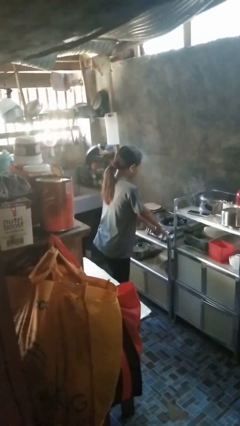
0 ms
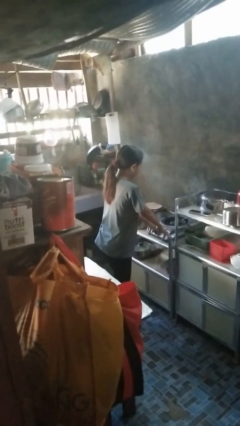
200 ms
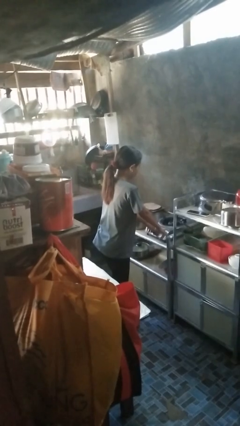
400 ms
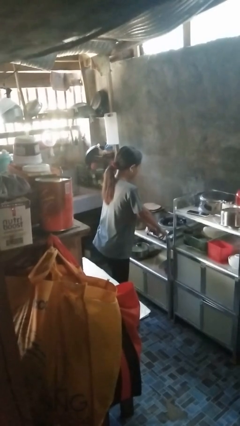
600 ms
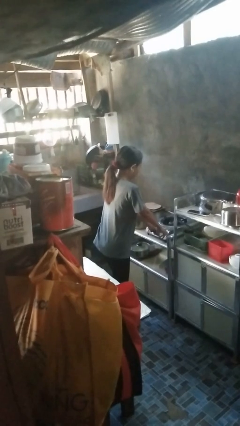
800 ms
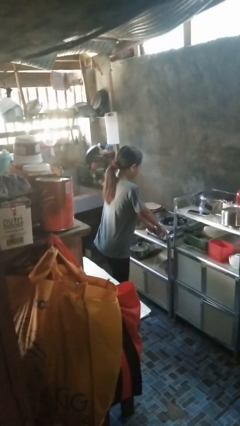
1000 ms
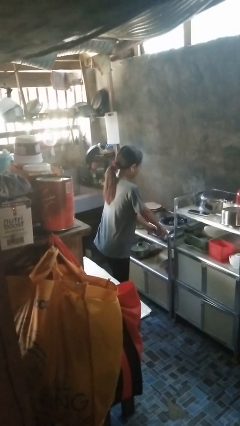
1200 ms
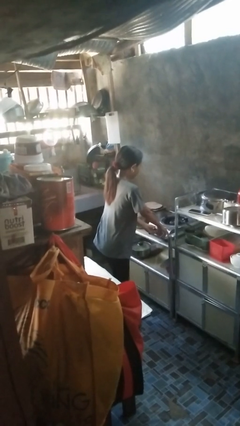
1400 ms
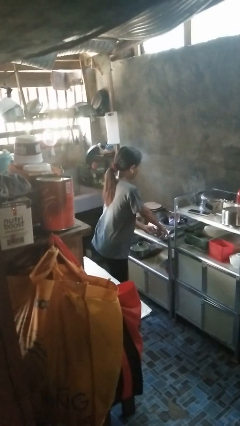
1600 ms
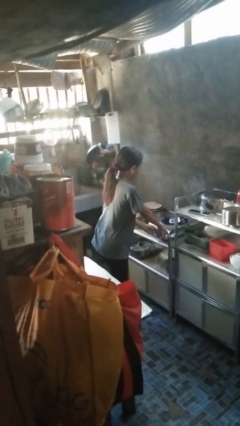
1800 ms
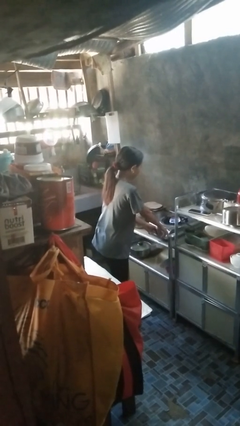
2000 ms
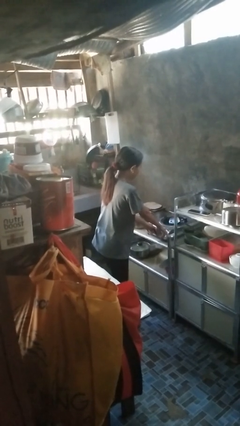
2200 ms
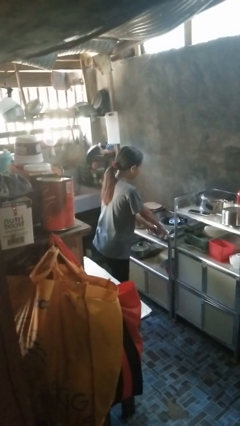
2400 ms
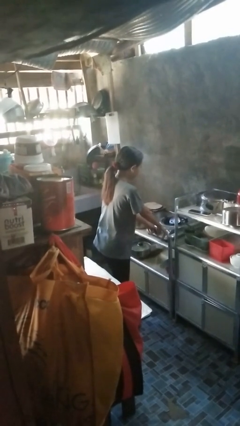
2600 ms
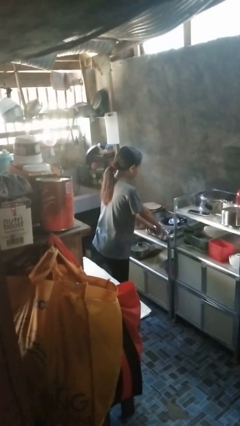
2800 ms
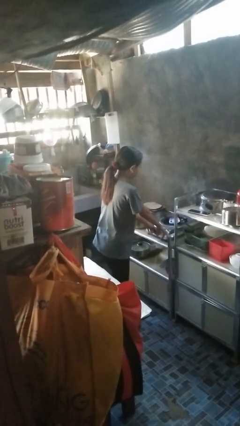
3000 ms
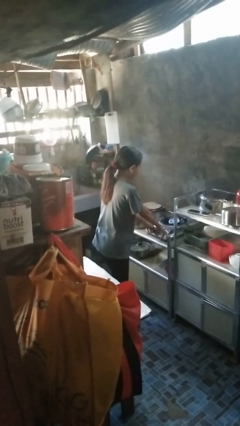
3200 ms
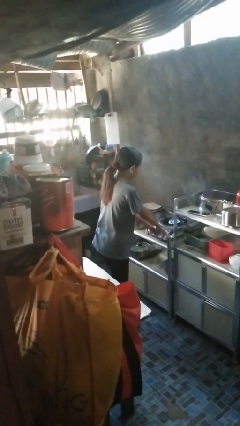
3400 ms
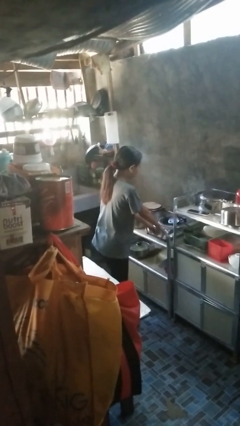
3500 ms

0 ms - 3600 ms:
person turns on stovetop

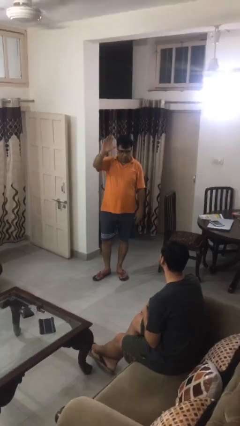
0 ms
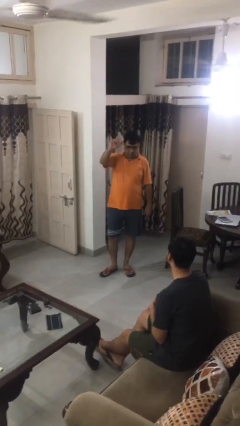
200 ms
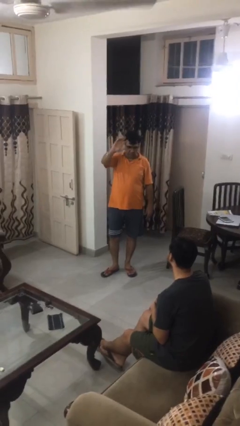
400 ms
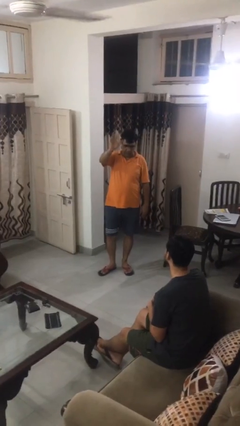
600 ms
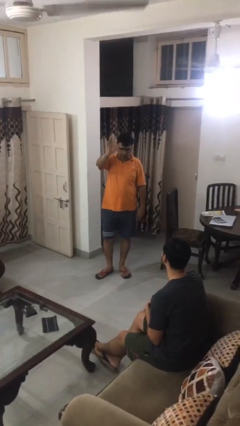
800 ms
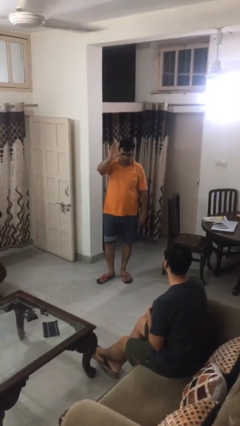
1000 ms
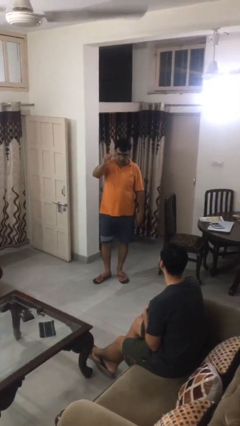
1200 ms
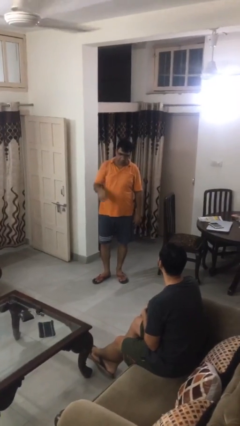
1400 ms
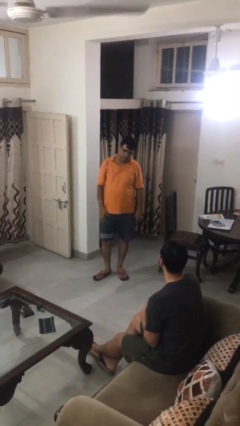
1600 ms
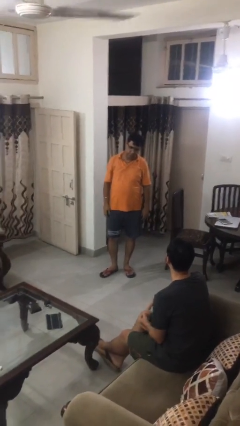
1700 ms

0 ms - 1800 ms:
person waves at person

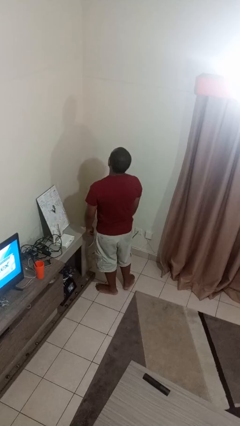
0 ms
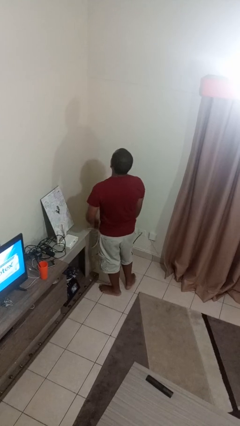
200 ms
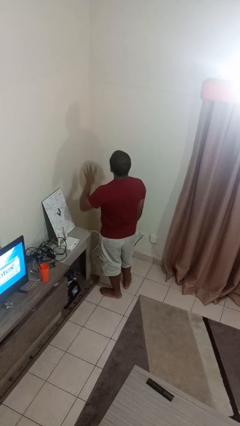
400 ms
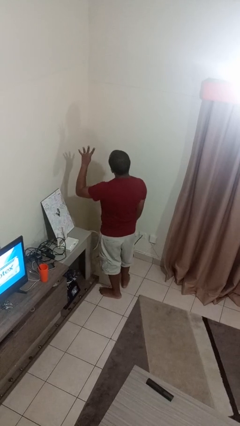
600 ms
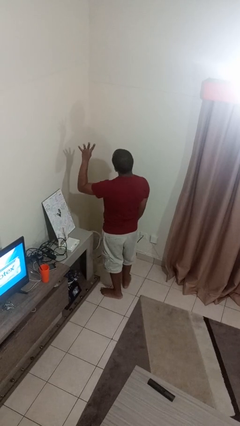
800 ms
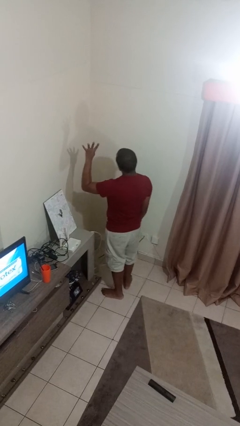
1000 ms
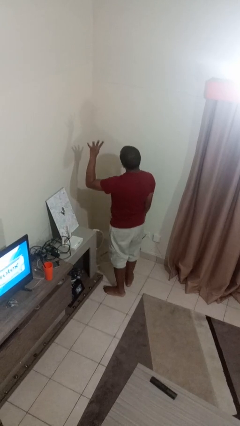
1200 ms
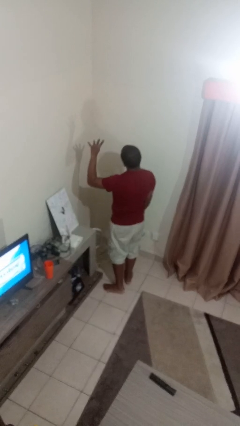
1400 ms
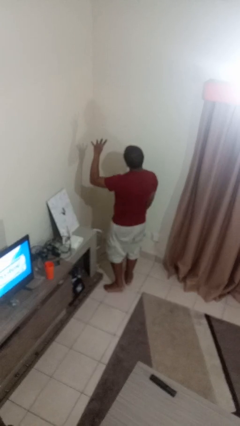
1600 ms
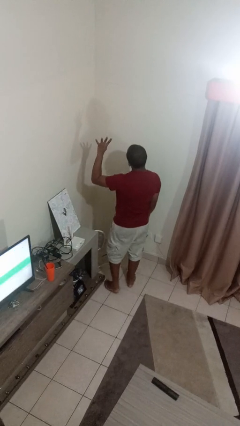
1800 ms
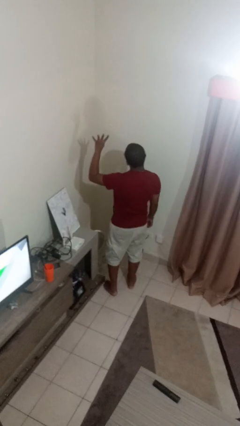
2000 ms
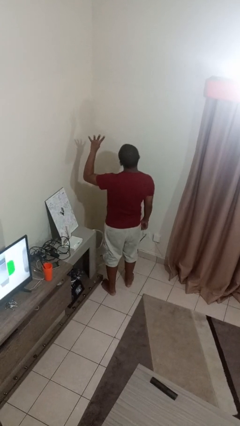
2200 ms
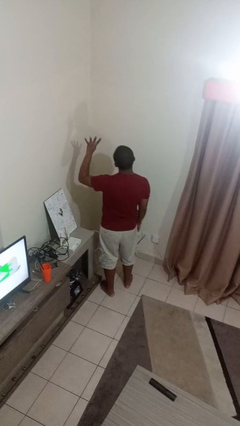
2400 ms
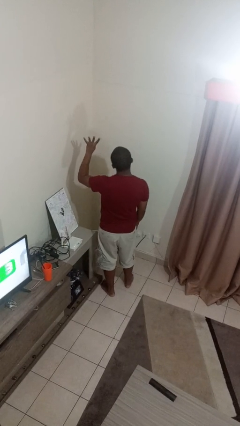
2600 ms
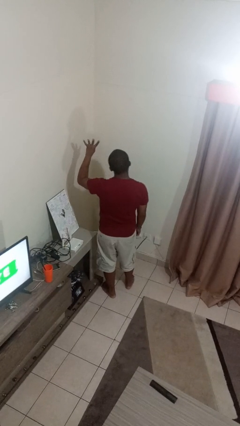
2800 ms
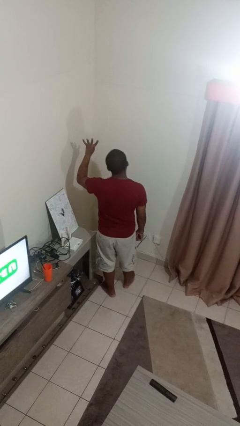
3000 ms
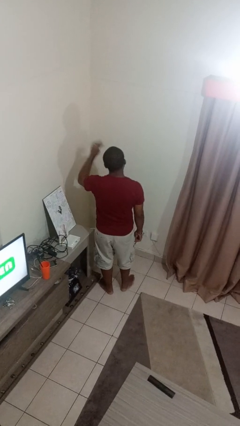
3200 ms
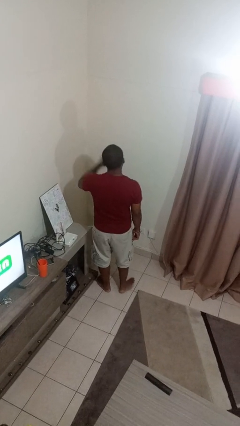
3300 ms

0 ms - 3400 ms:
person gestures number four

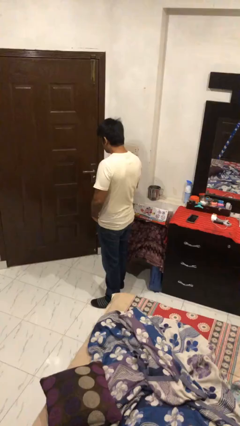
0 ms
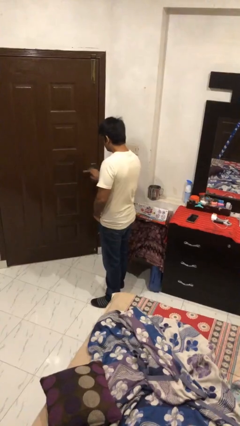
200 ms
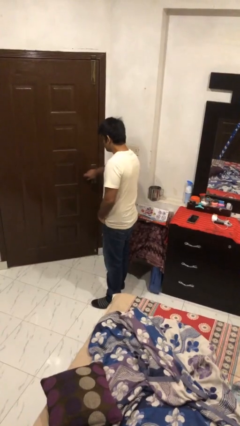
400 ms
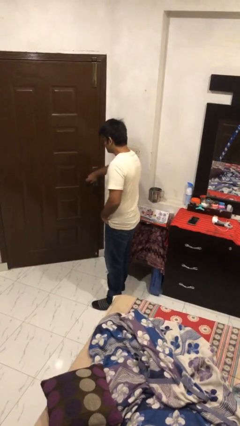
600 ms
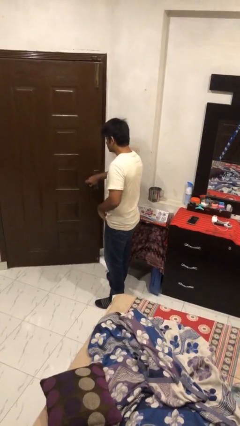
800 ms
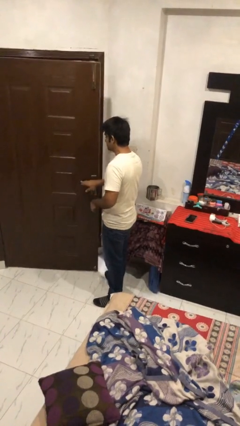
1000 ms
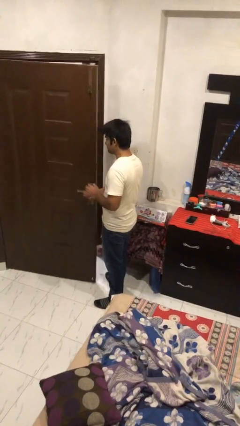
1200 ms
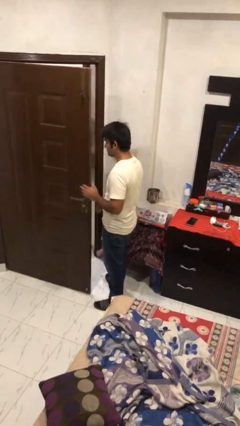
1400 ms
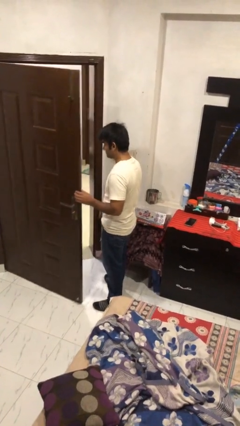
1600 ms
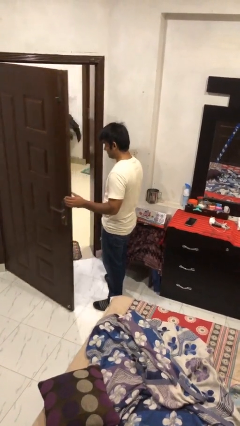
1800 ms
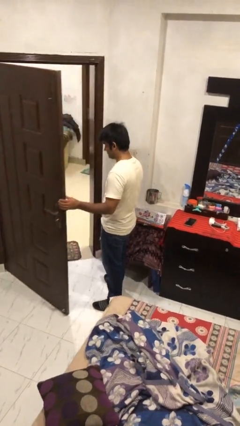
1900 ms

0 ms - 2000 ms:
person opens facility door

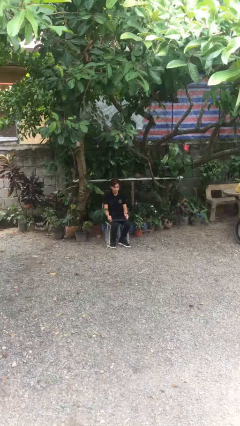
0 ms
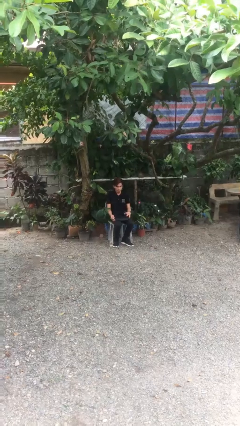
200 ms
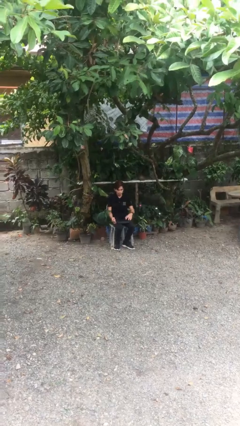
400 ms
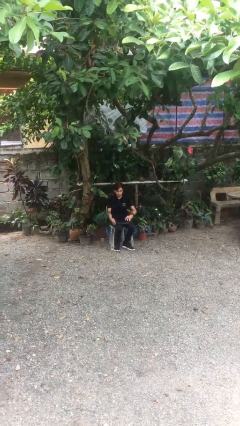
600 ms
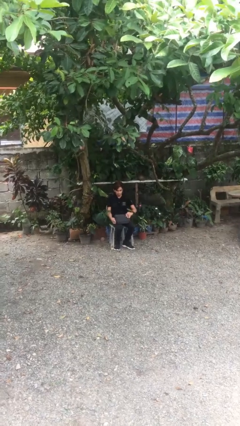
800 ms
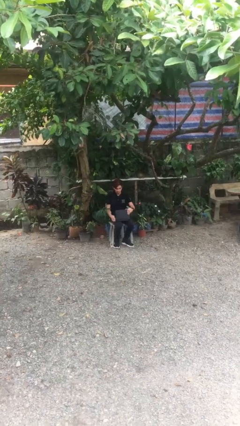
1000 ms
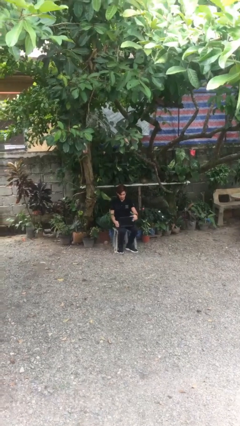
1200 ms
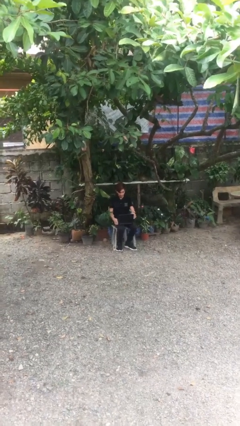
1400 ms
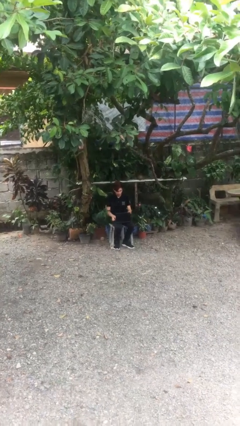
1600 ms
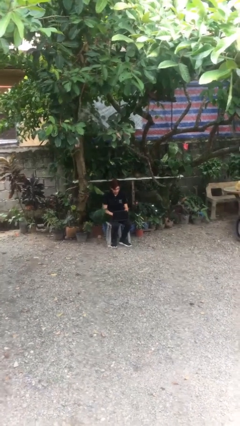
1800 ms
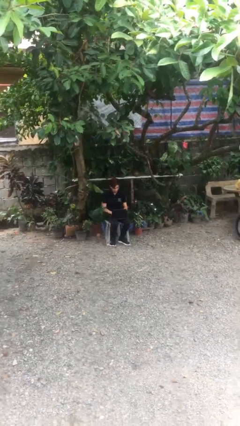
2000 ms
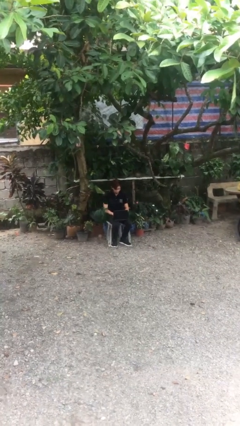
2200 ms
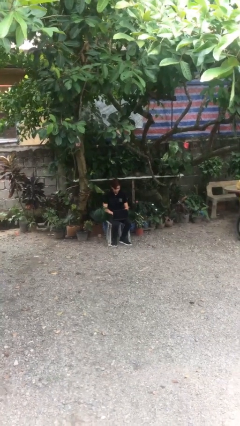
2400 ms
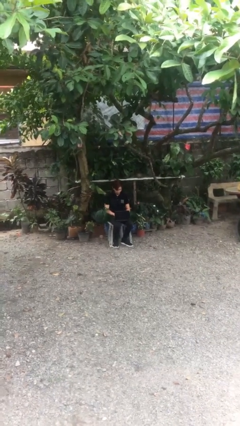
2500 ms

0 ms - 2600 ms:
person interacts with laptop

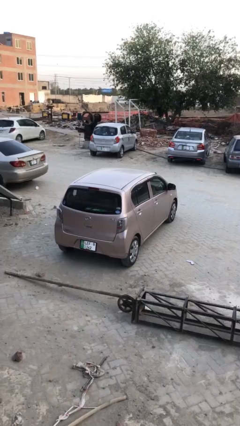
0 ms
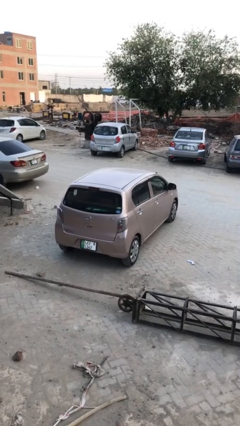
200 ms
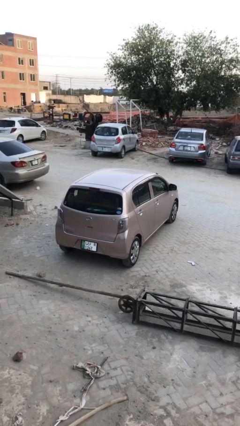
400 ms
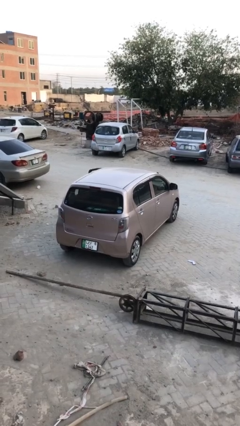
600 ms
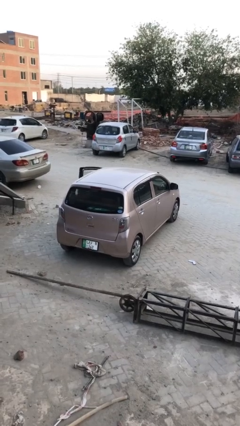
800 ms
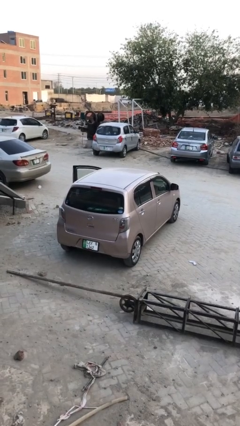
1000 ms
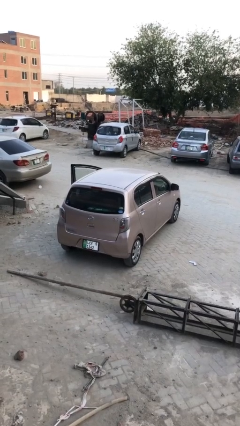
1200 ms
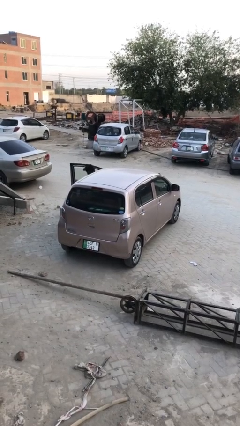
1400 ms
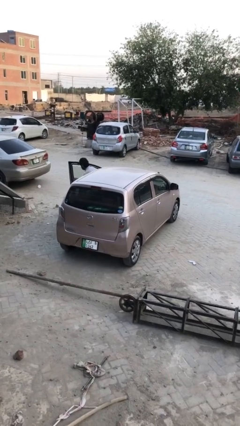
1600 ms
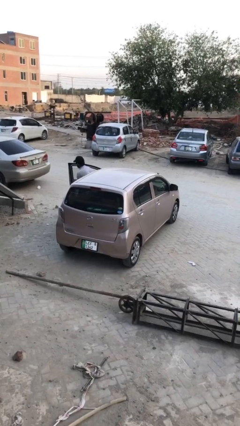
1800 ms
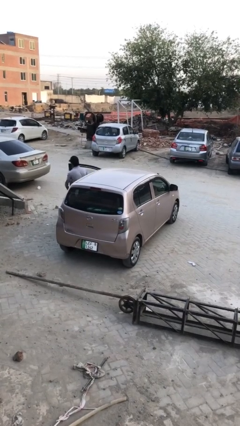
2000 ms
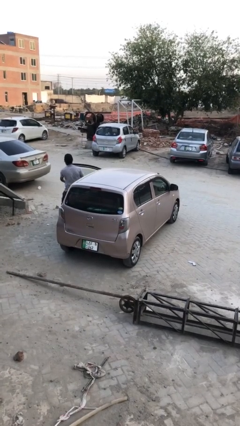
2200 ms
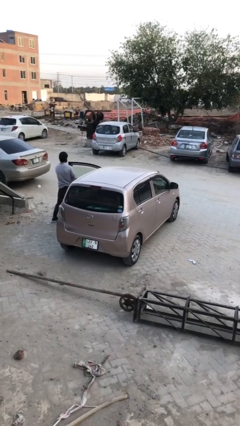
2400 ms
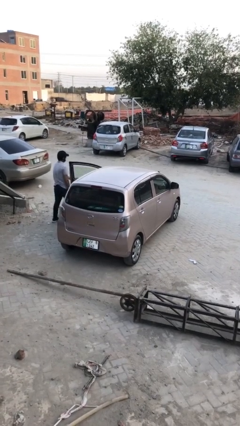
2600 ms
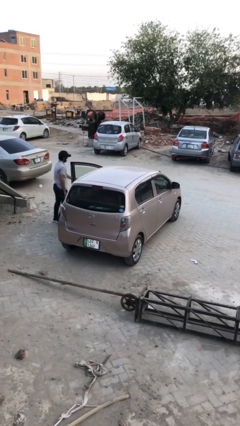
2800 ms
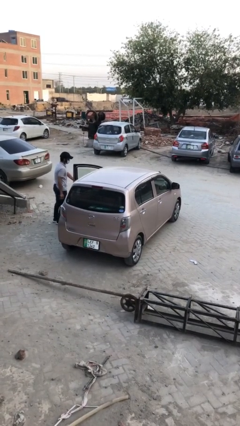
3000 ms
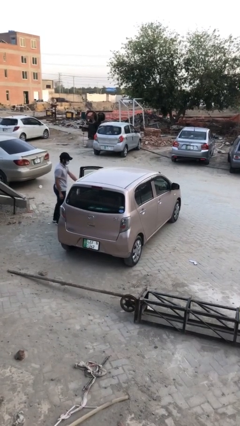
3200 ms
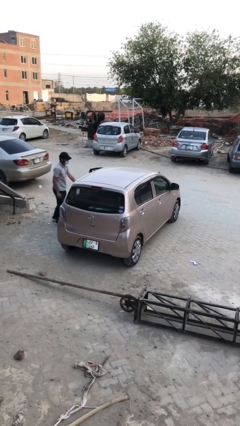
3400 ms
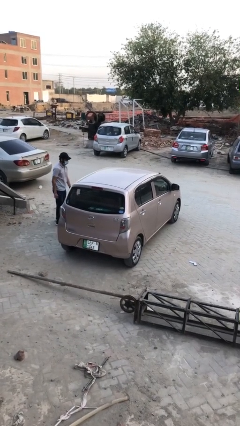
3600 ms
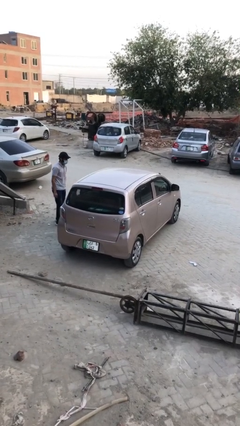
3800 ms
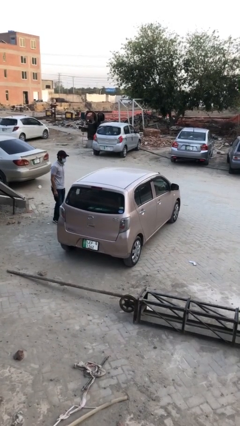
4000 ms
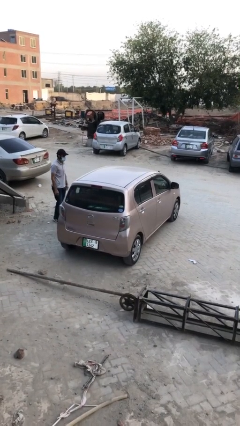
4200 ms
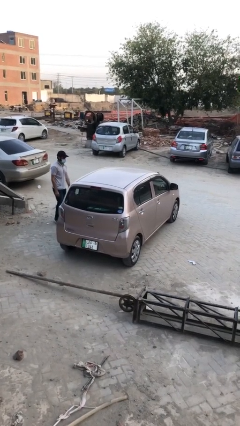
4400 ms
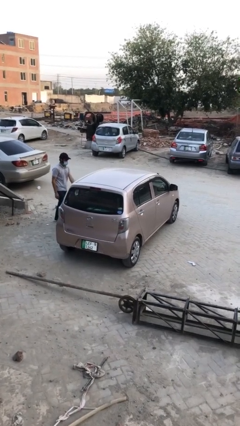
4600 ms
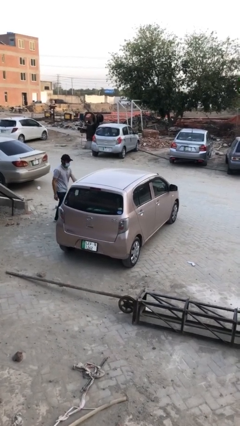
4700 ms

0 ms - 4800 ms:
car drops off person
